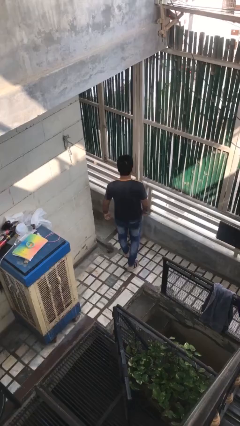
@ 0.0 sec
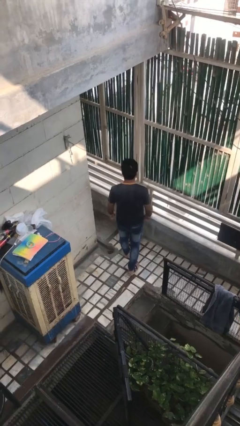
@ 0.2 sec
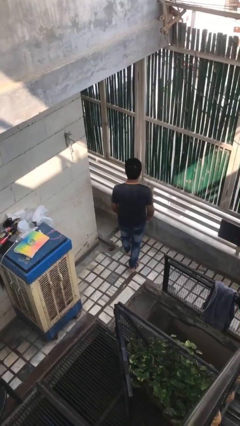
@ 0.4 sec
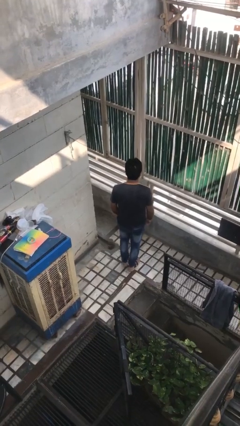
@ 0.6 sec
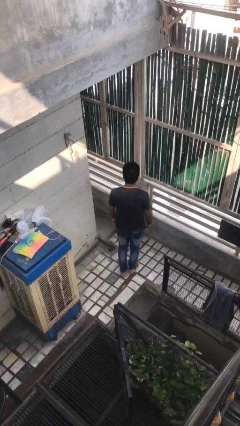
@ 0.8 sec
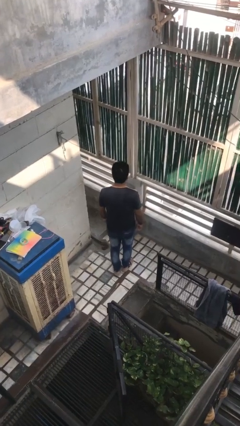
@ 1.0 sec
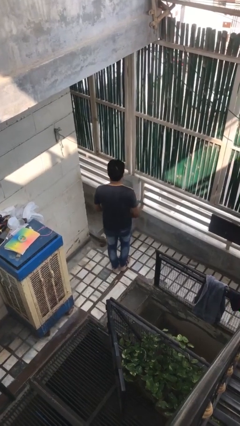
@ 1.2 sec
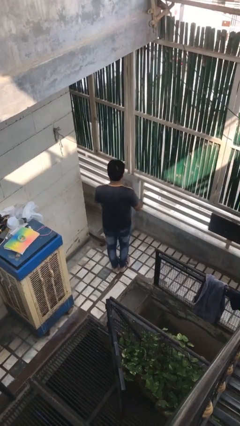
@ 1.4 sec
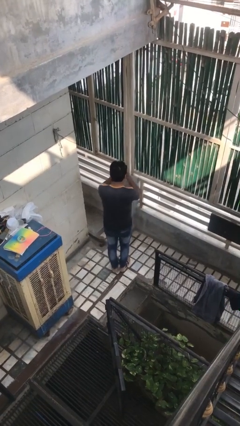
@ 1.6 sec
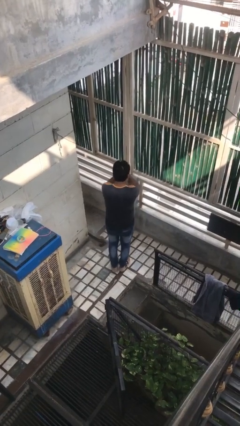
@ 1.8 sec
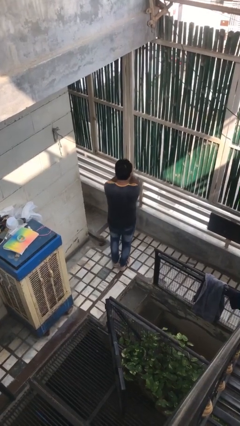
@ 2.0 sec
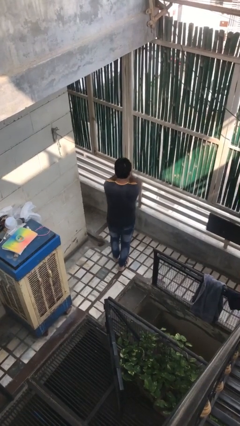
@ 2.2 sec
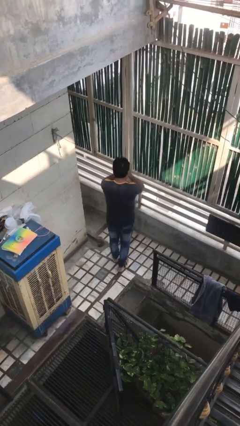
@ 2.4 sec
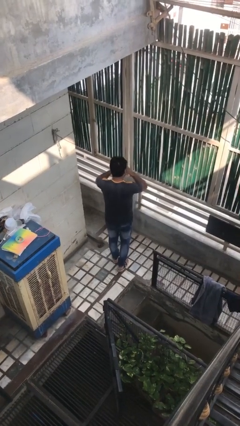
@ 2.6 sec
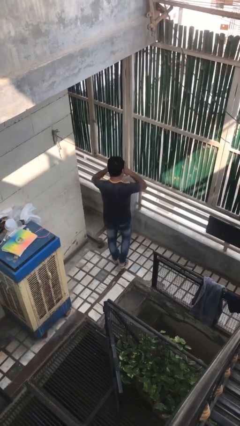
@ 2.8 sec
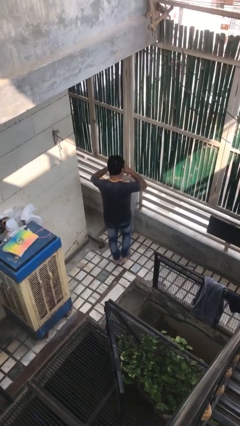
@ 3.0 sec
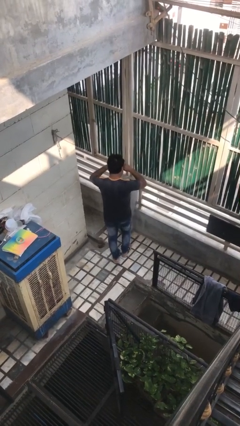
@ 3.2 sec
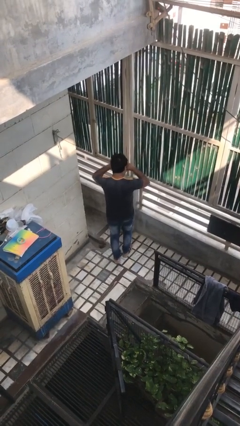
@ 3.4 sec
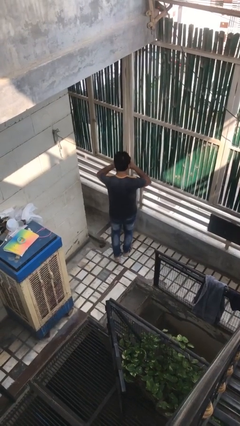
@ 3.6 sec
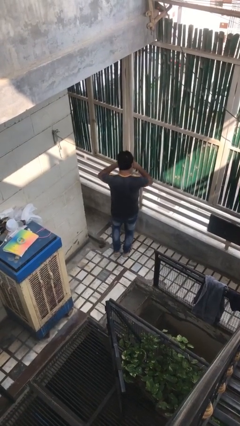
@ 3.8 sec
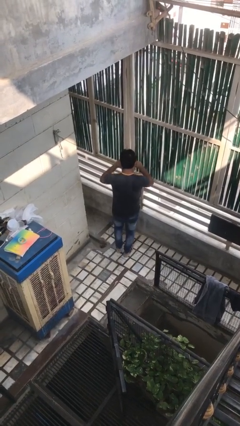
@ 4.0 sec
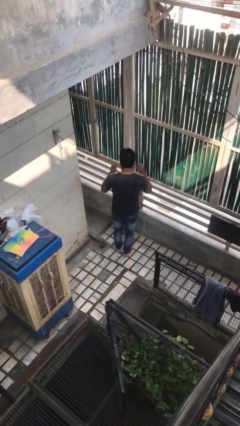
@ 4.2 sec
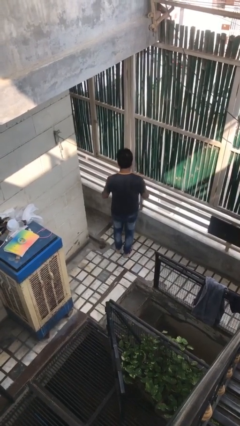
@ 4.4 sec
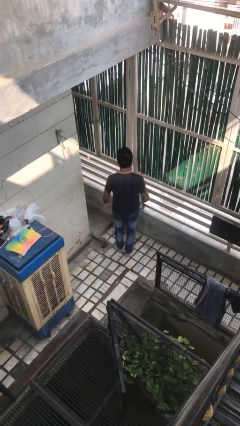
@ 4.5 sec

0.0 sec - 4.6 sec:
person rubs eyes

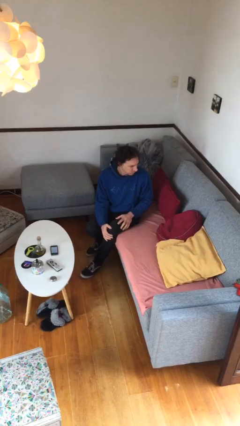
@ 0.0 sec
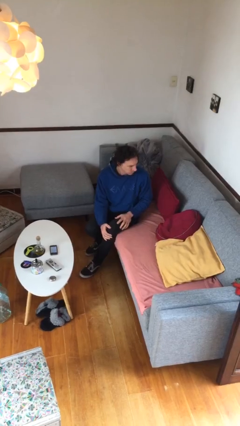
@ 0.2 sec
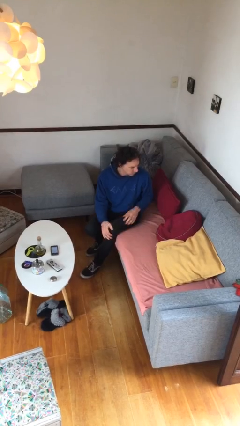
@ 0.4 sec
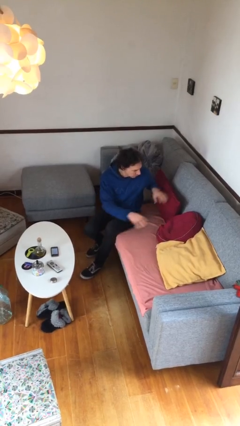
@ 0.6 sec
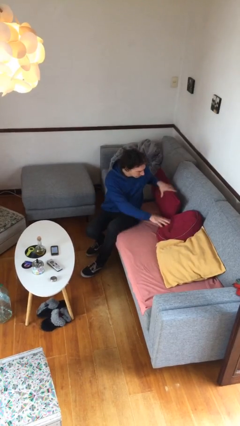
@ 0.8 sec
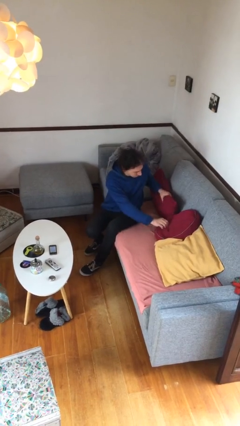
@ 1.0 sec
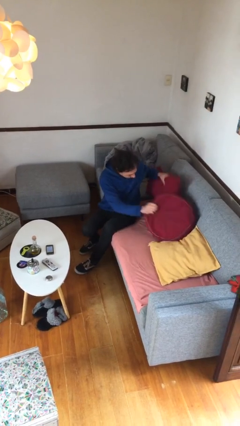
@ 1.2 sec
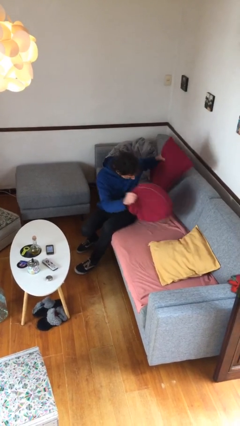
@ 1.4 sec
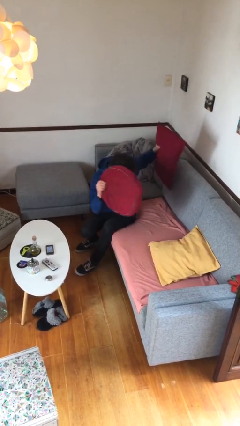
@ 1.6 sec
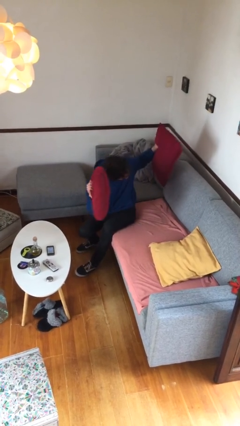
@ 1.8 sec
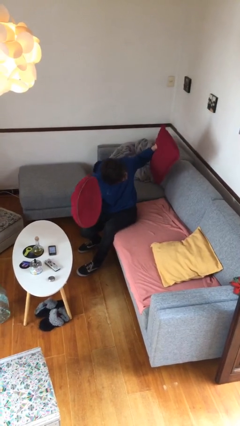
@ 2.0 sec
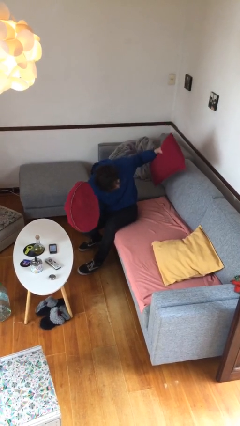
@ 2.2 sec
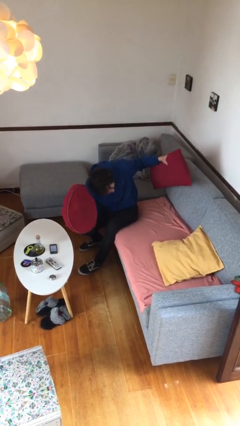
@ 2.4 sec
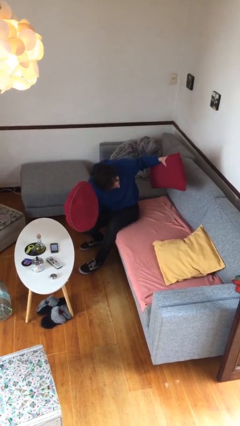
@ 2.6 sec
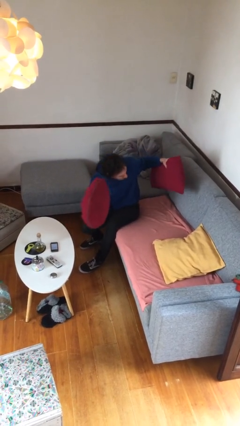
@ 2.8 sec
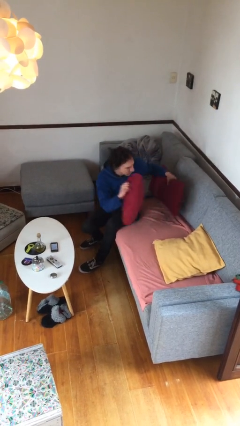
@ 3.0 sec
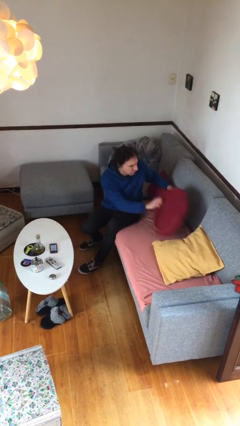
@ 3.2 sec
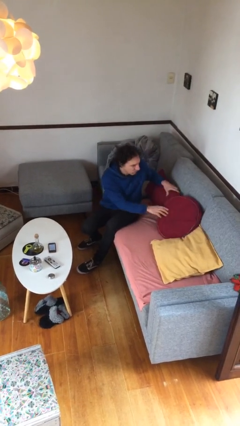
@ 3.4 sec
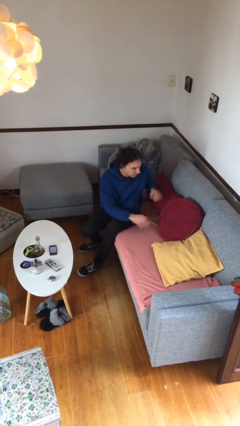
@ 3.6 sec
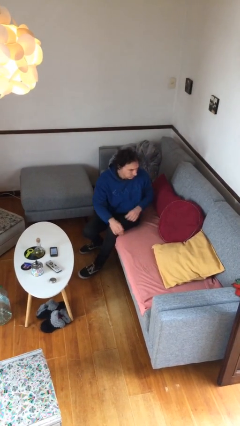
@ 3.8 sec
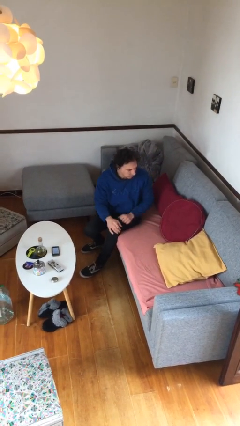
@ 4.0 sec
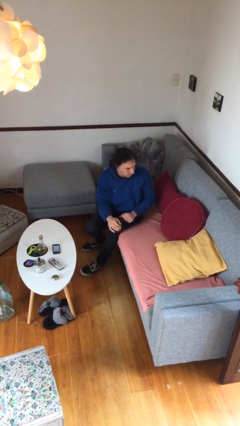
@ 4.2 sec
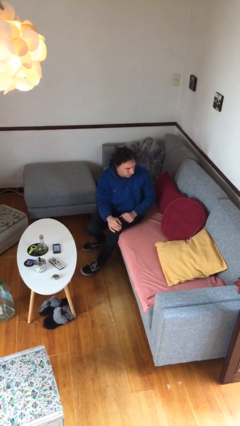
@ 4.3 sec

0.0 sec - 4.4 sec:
person searches in couch

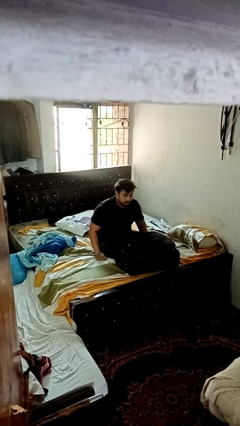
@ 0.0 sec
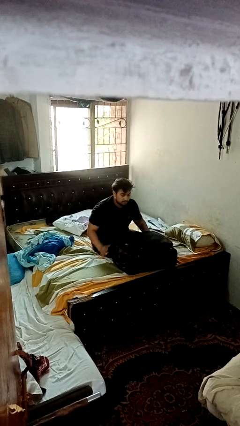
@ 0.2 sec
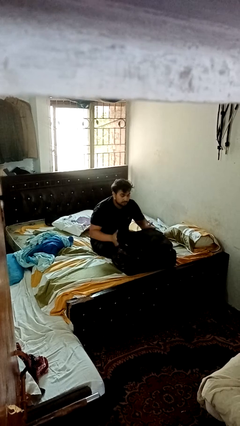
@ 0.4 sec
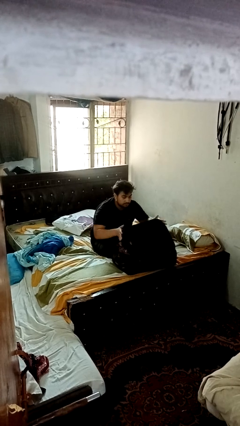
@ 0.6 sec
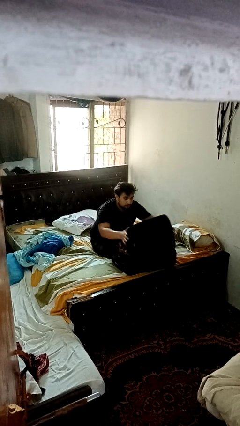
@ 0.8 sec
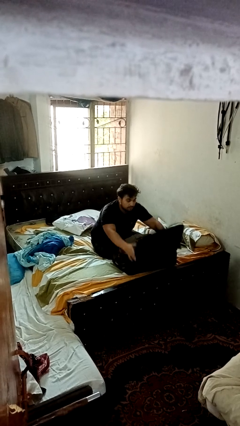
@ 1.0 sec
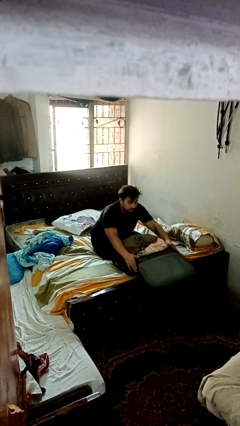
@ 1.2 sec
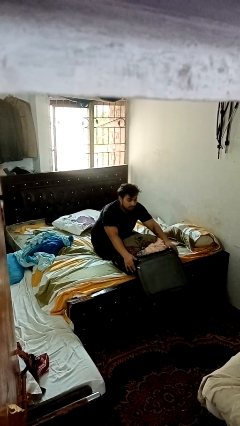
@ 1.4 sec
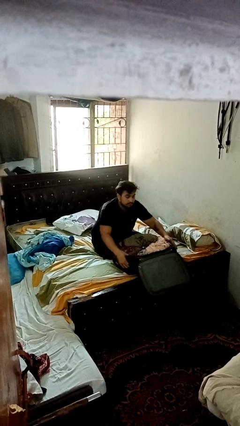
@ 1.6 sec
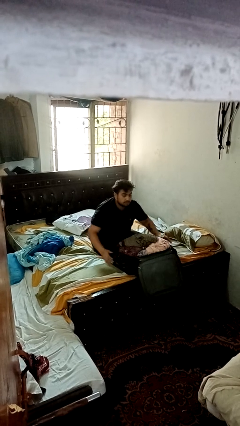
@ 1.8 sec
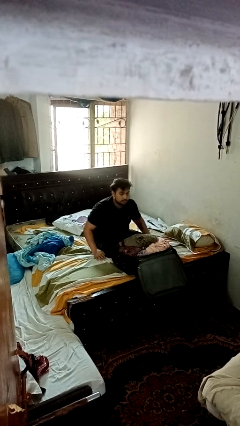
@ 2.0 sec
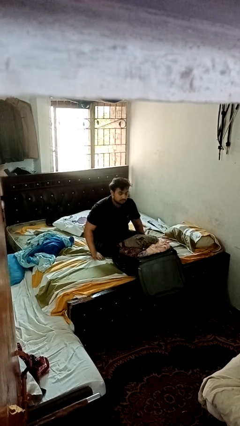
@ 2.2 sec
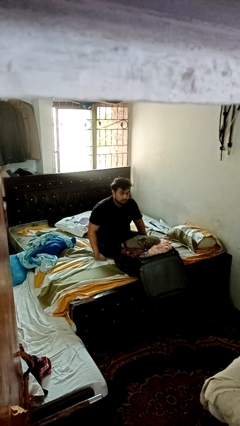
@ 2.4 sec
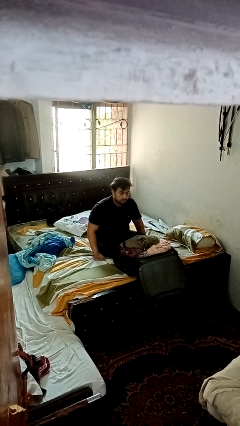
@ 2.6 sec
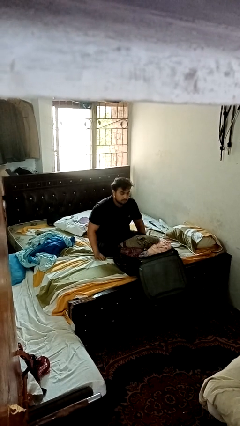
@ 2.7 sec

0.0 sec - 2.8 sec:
person opens suitcase

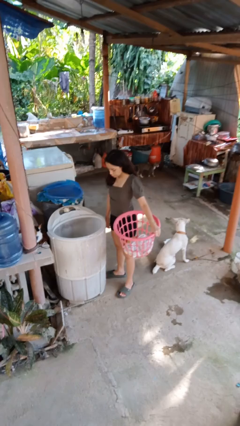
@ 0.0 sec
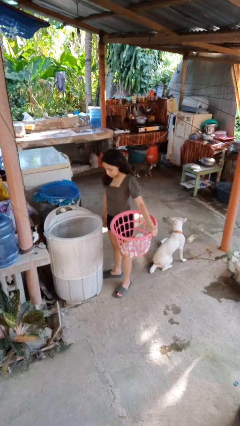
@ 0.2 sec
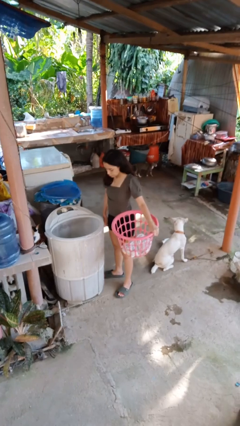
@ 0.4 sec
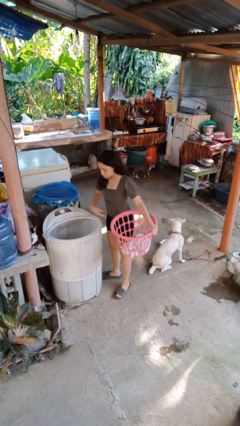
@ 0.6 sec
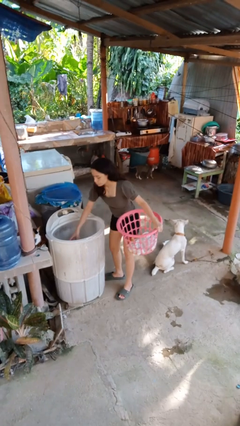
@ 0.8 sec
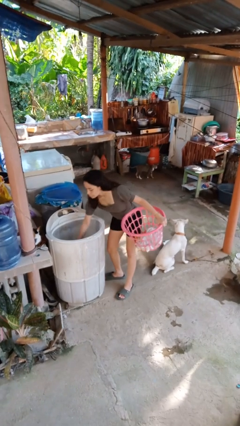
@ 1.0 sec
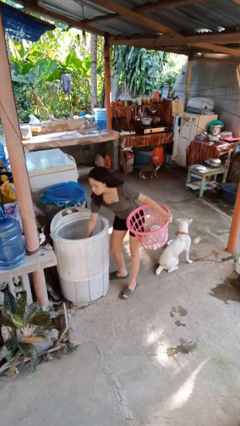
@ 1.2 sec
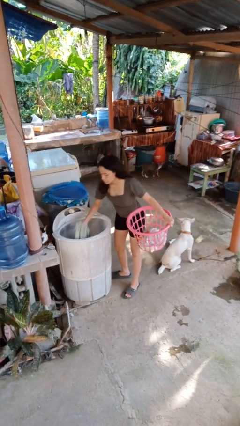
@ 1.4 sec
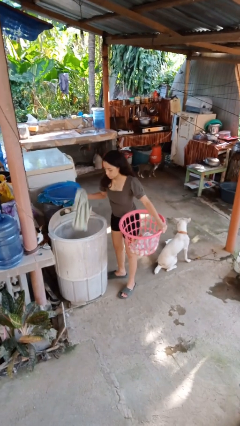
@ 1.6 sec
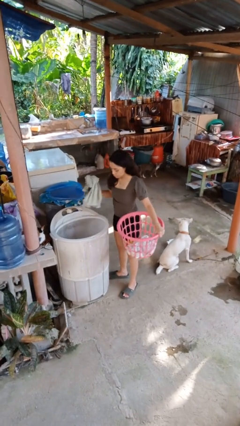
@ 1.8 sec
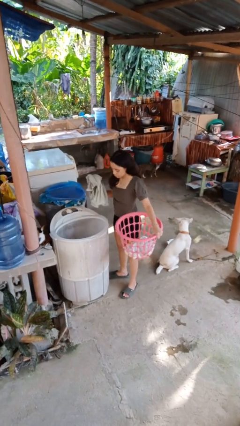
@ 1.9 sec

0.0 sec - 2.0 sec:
person unloads dryer

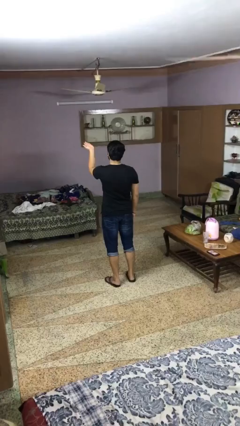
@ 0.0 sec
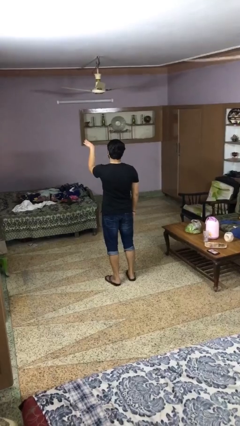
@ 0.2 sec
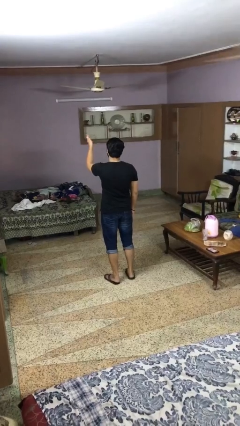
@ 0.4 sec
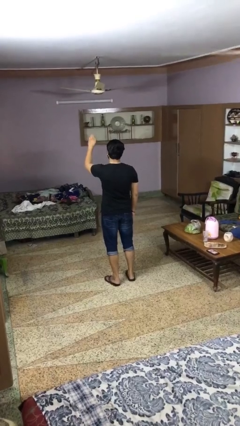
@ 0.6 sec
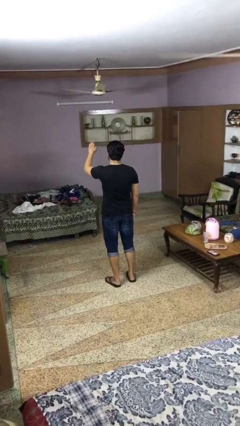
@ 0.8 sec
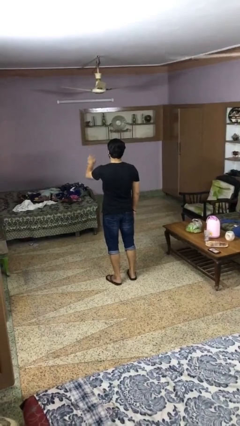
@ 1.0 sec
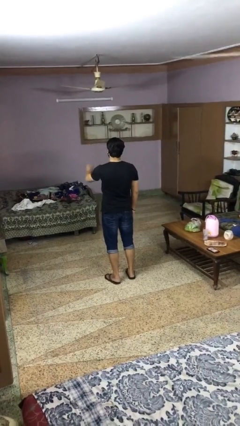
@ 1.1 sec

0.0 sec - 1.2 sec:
person gestures swipe down

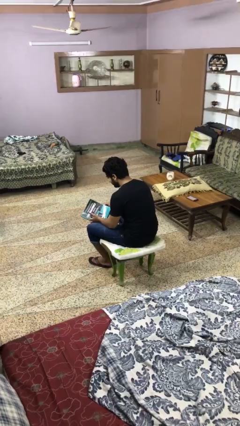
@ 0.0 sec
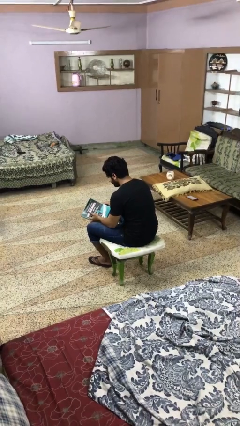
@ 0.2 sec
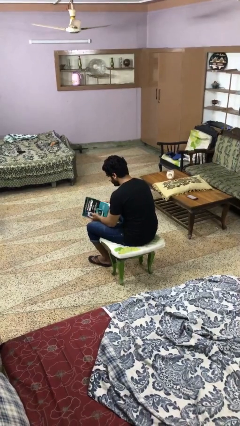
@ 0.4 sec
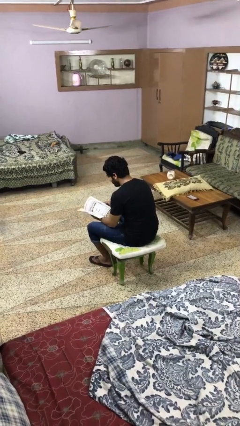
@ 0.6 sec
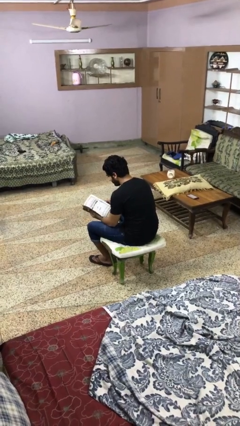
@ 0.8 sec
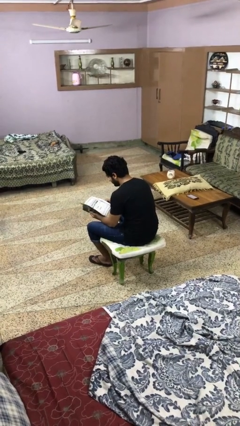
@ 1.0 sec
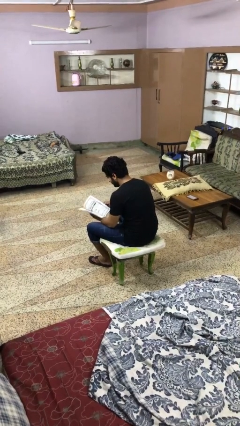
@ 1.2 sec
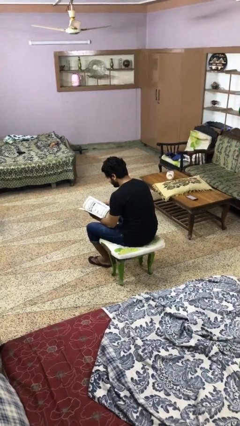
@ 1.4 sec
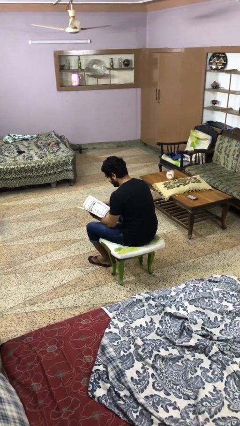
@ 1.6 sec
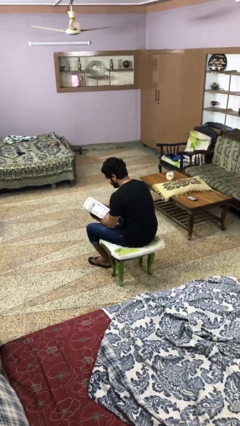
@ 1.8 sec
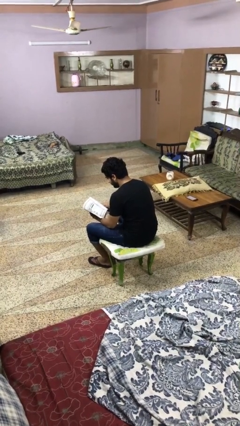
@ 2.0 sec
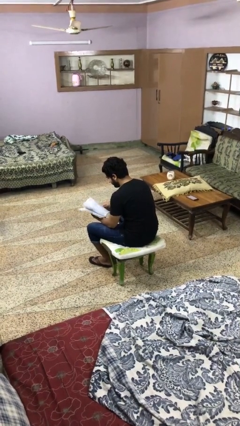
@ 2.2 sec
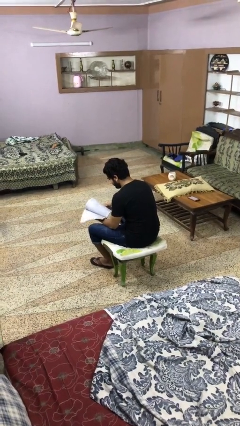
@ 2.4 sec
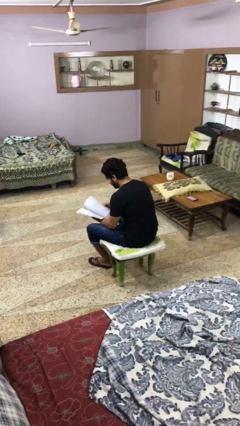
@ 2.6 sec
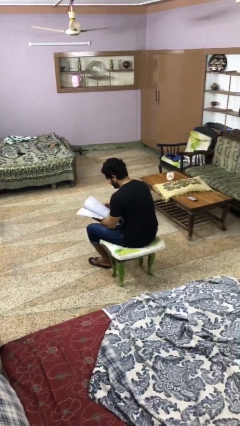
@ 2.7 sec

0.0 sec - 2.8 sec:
person reads book
